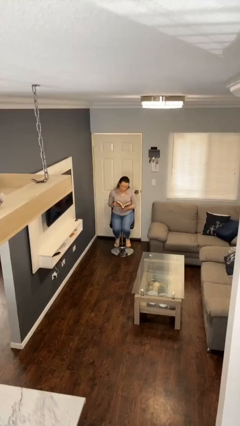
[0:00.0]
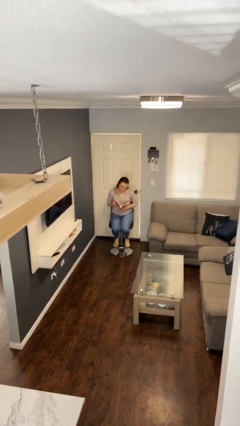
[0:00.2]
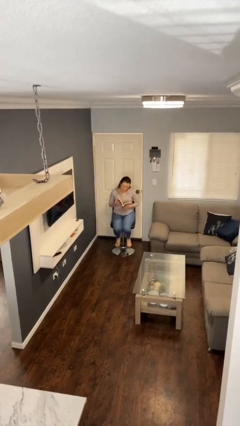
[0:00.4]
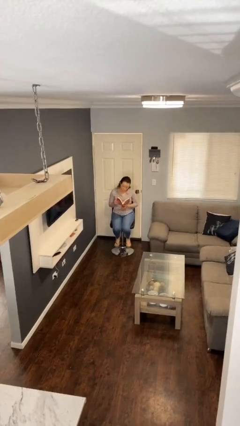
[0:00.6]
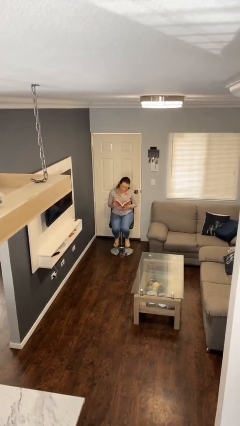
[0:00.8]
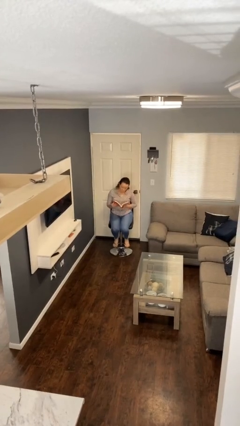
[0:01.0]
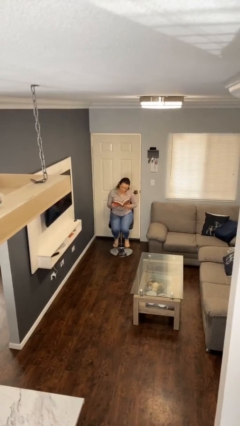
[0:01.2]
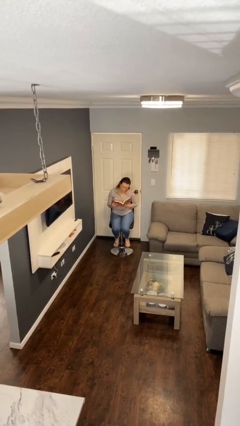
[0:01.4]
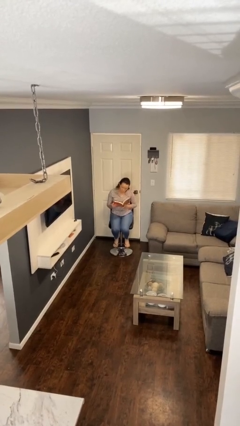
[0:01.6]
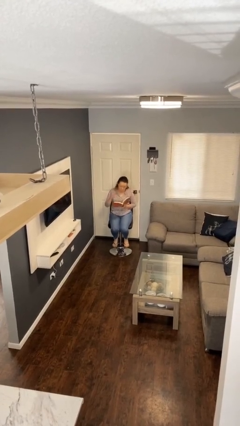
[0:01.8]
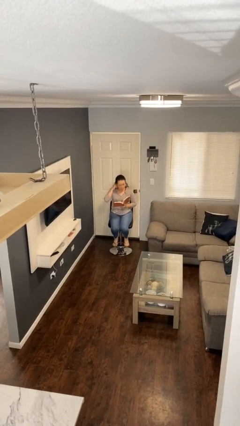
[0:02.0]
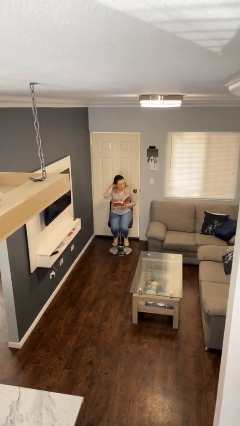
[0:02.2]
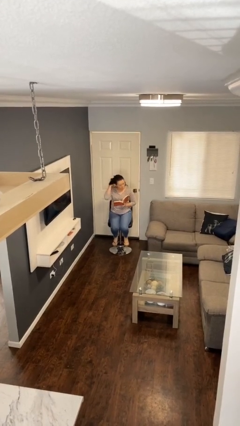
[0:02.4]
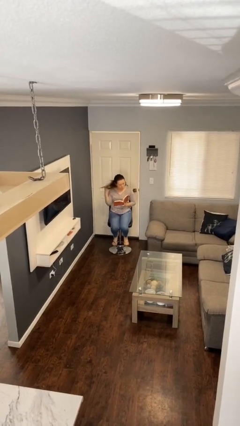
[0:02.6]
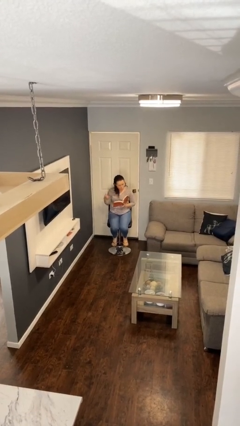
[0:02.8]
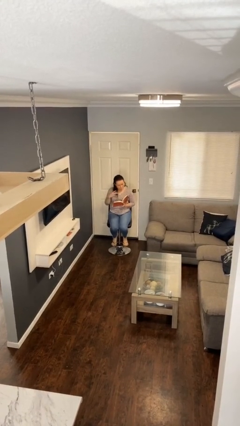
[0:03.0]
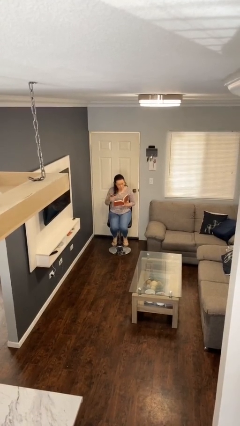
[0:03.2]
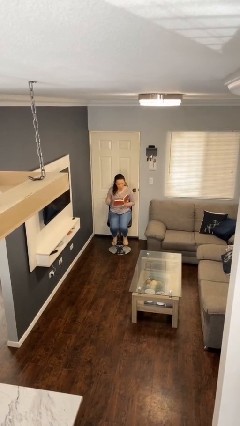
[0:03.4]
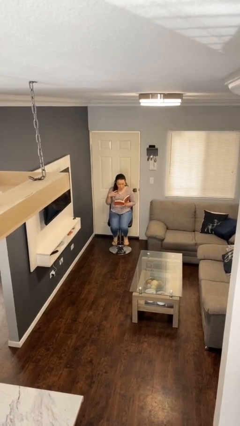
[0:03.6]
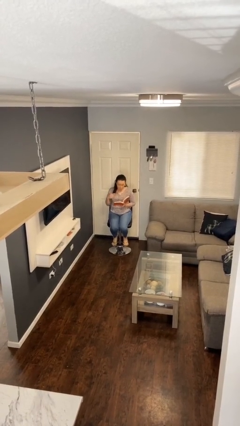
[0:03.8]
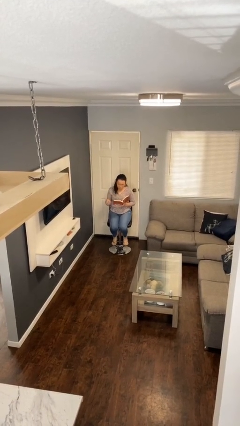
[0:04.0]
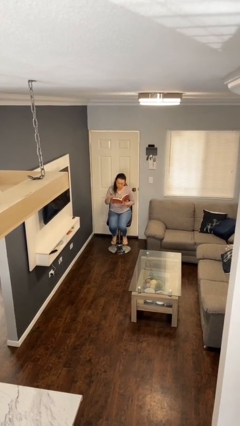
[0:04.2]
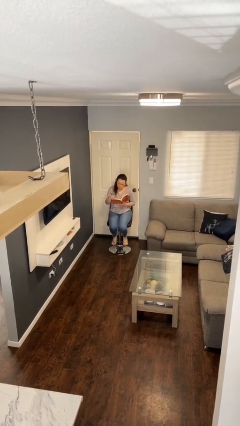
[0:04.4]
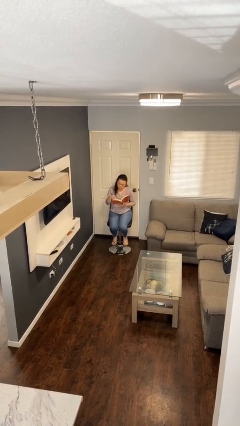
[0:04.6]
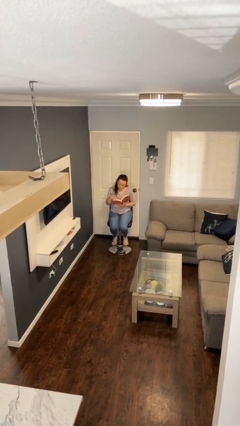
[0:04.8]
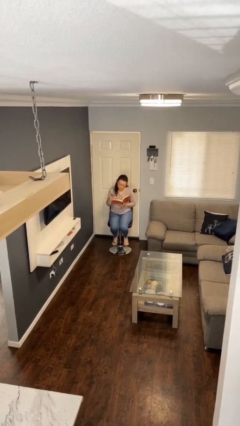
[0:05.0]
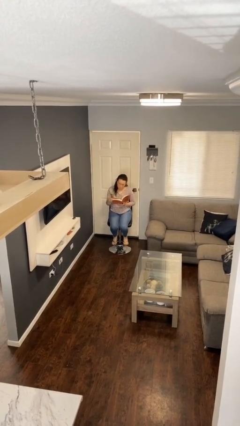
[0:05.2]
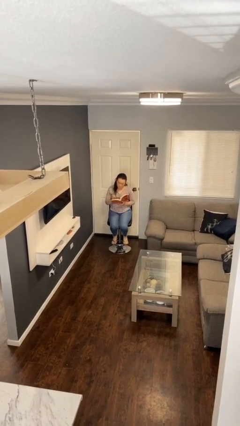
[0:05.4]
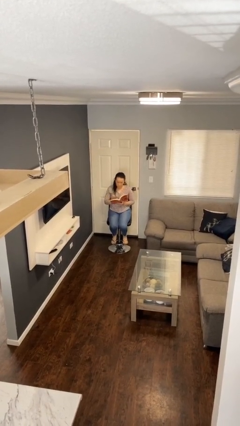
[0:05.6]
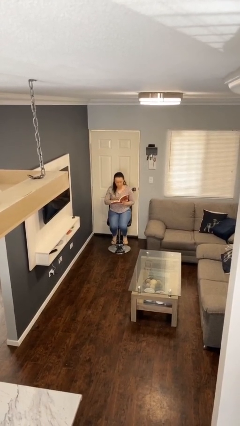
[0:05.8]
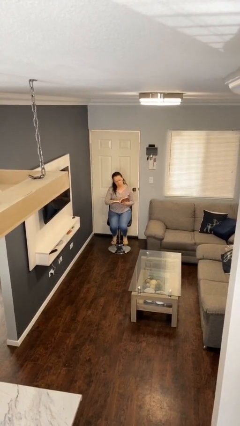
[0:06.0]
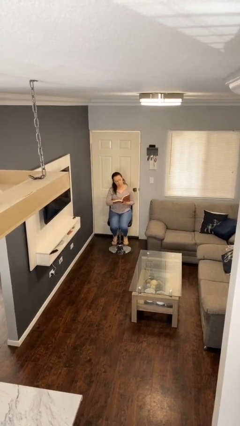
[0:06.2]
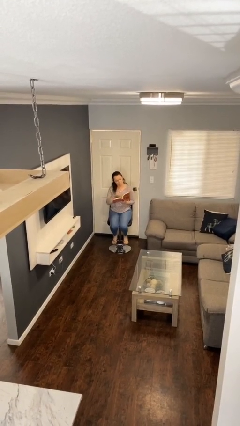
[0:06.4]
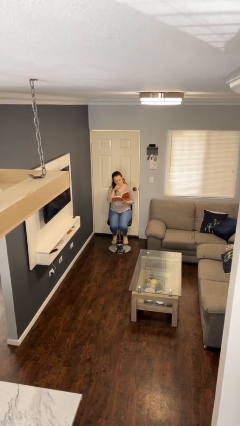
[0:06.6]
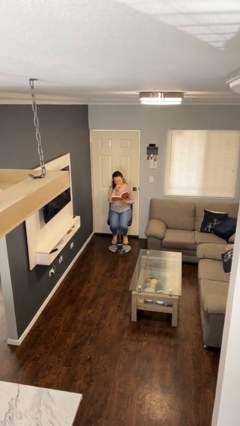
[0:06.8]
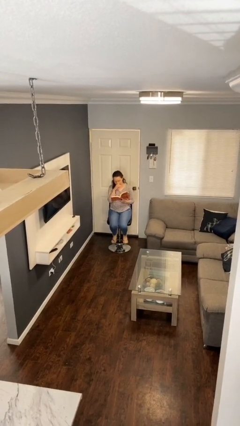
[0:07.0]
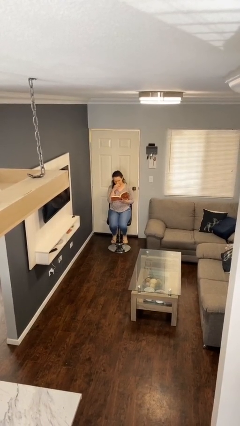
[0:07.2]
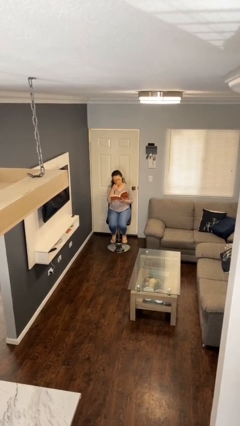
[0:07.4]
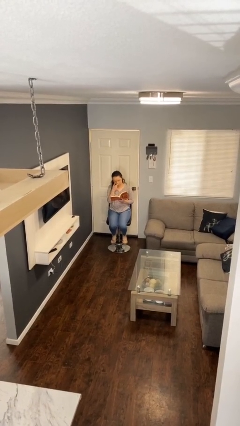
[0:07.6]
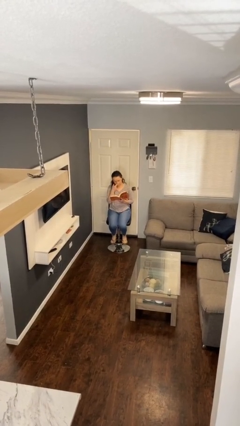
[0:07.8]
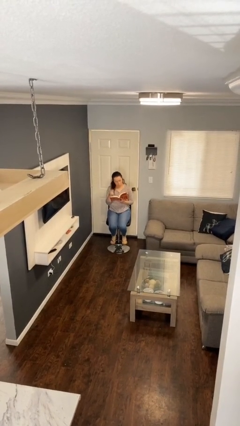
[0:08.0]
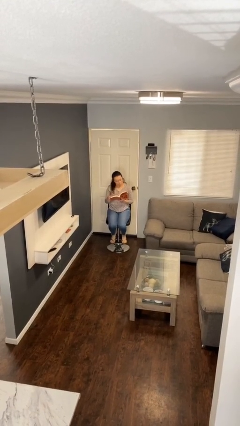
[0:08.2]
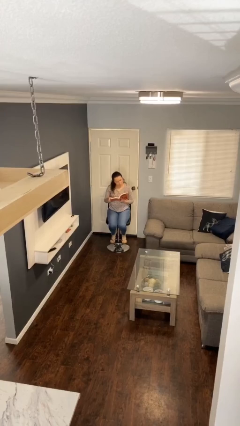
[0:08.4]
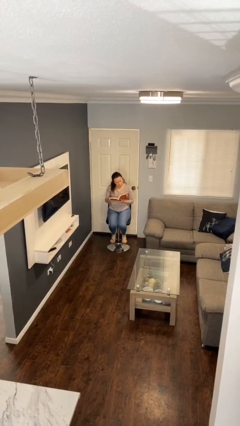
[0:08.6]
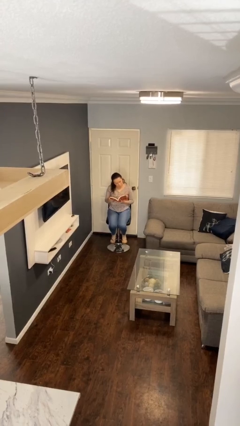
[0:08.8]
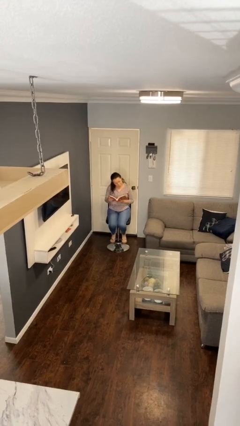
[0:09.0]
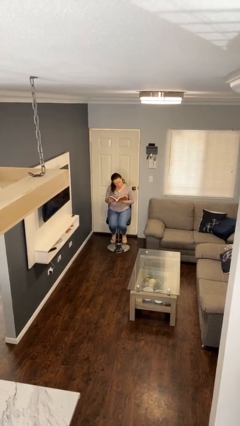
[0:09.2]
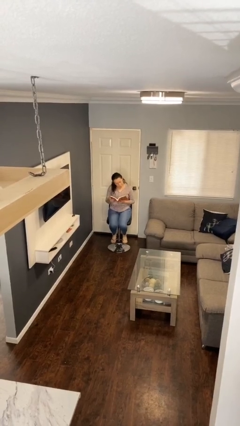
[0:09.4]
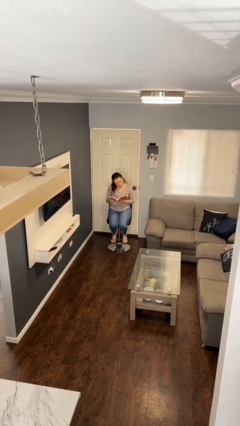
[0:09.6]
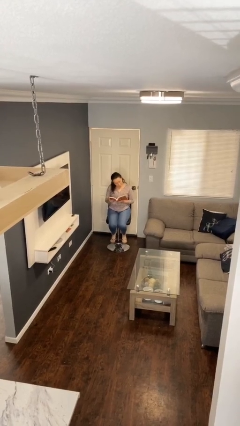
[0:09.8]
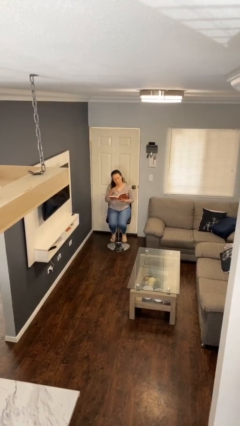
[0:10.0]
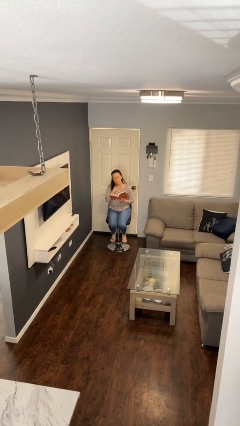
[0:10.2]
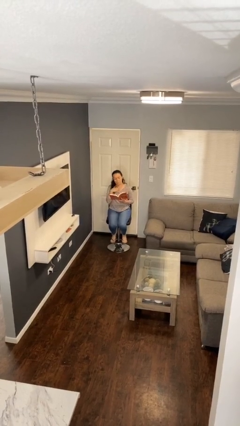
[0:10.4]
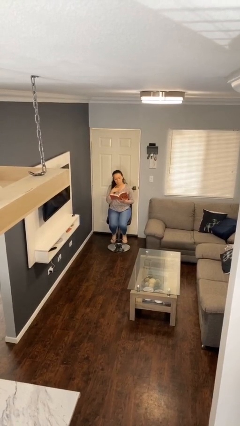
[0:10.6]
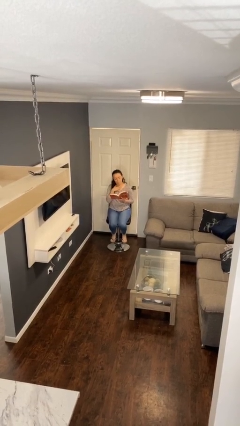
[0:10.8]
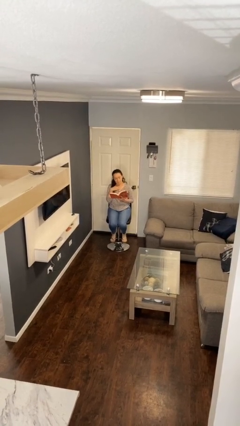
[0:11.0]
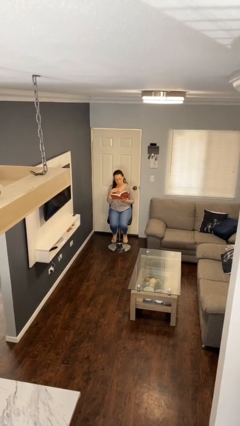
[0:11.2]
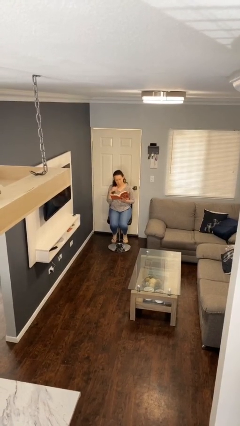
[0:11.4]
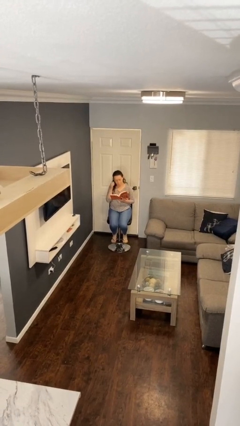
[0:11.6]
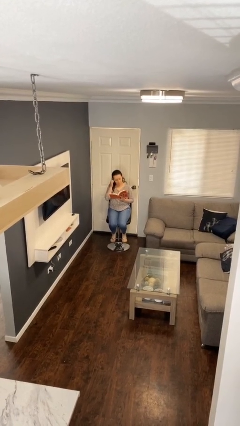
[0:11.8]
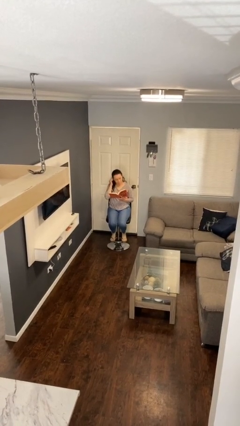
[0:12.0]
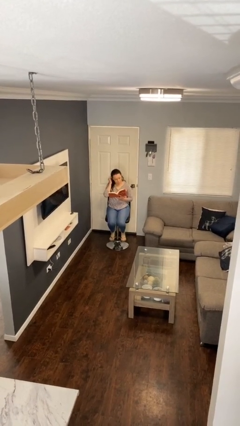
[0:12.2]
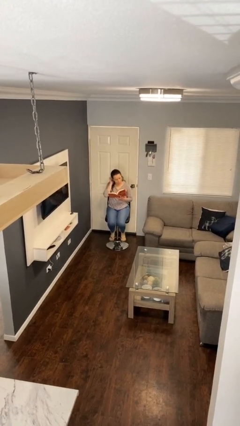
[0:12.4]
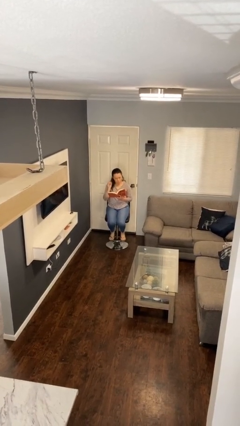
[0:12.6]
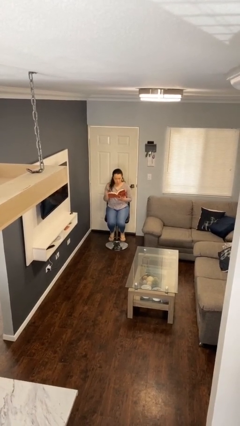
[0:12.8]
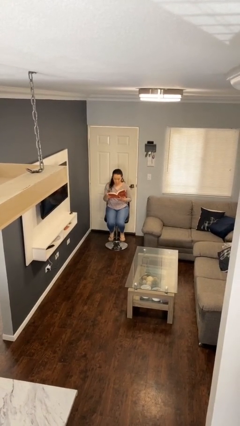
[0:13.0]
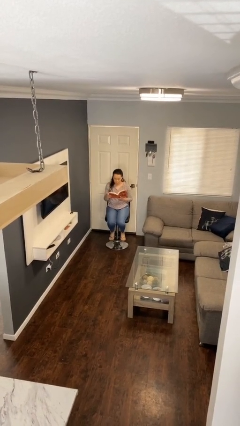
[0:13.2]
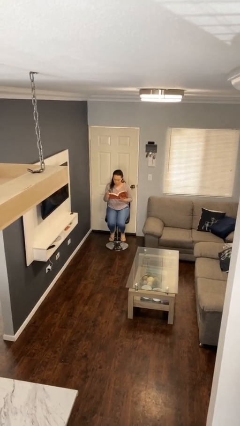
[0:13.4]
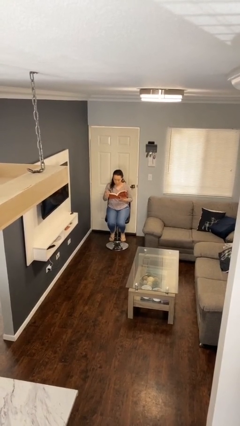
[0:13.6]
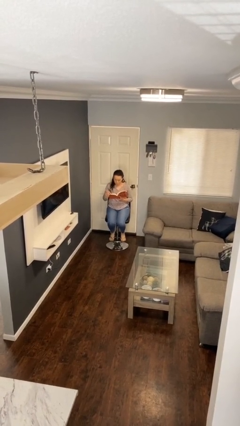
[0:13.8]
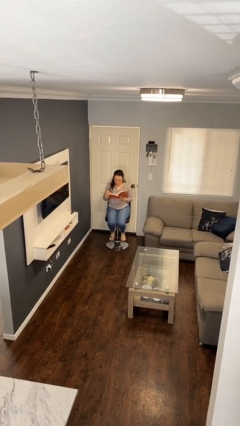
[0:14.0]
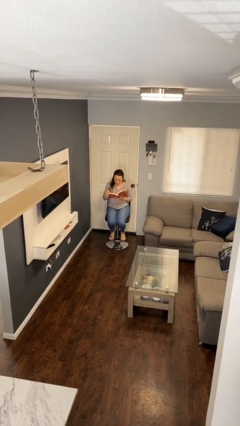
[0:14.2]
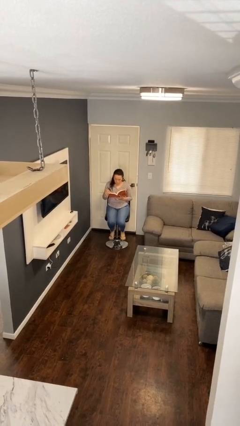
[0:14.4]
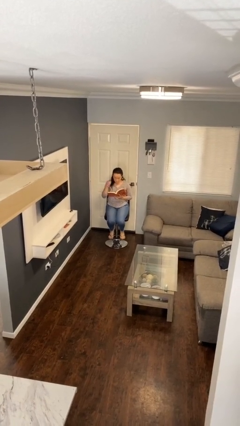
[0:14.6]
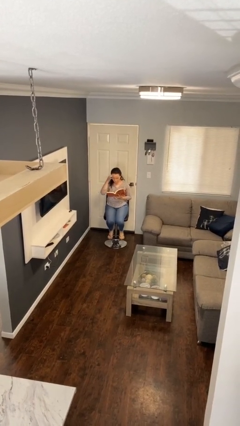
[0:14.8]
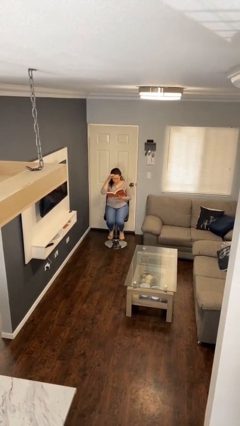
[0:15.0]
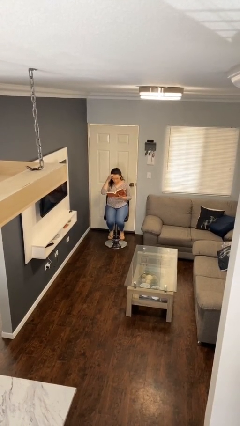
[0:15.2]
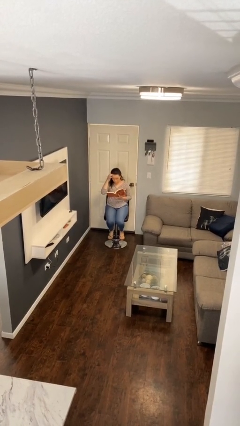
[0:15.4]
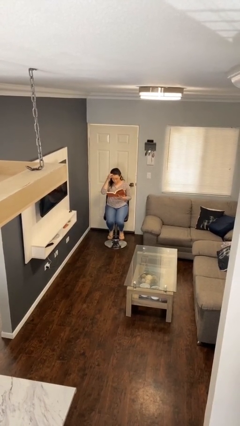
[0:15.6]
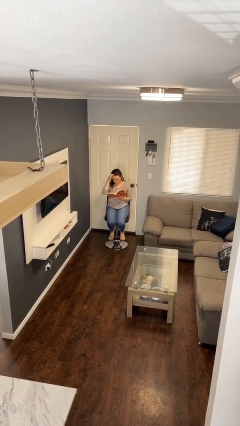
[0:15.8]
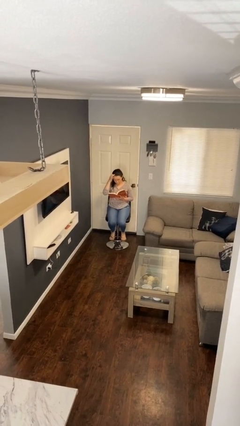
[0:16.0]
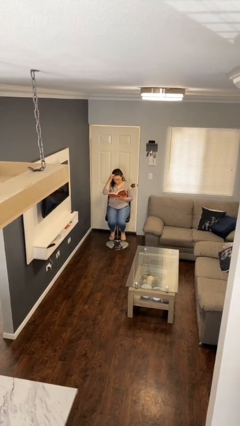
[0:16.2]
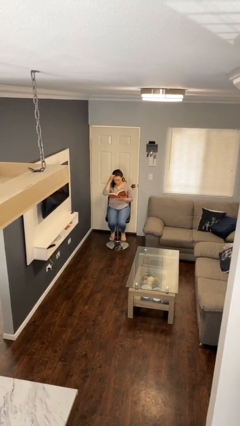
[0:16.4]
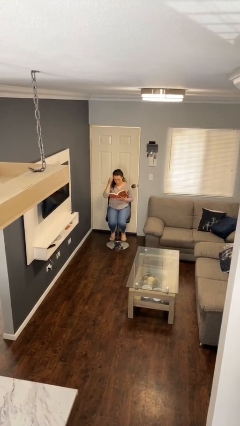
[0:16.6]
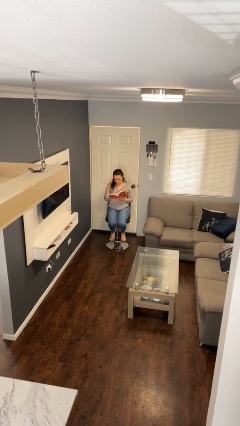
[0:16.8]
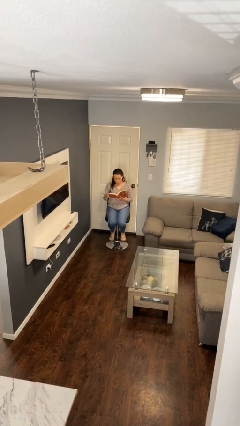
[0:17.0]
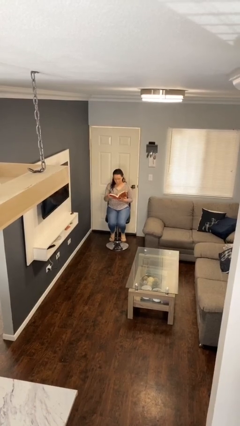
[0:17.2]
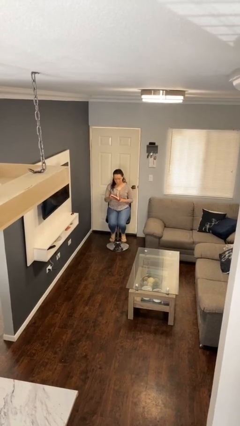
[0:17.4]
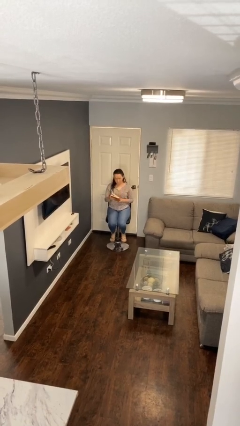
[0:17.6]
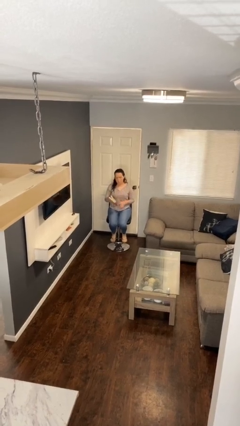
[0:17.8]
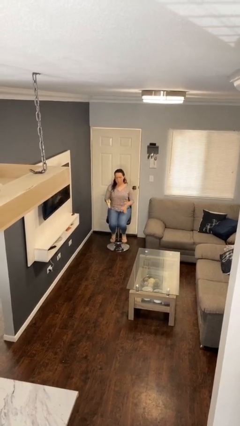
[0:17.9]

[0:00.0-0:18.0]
person reads document
